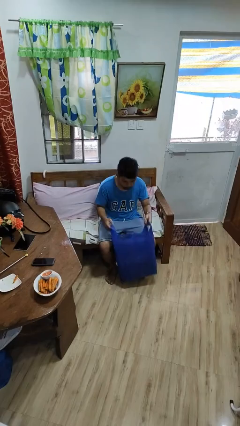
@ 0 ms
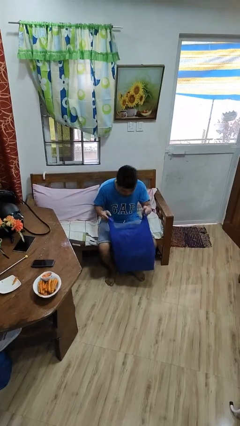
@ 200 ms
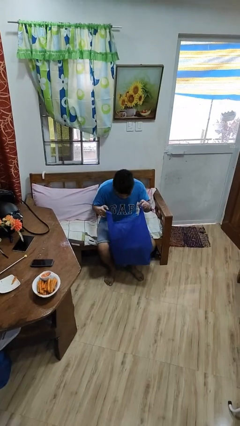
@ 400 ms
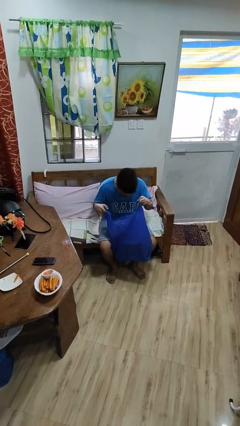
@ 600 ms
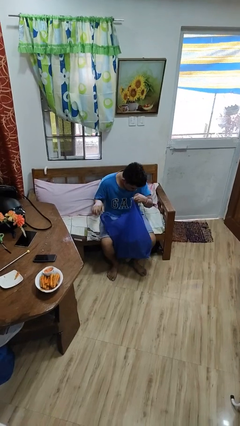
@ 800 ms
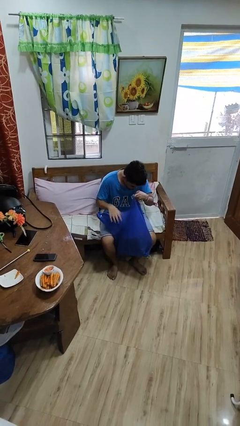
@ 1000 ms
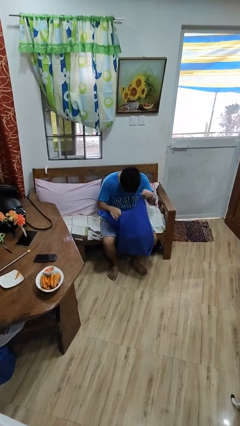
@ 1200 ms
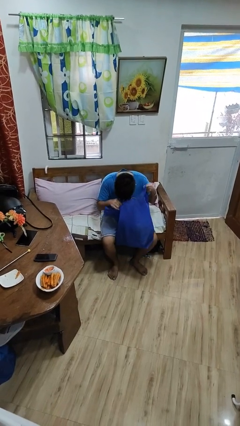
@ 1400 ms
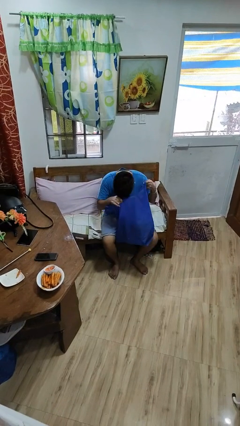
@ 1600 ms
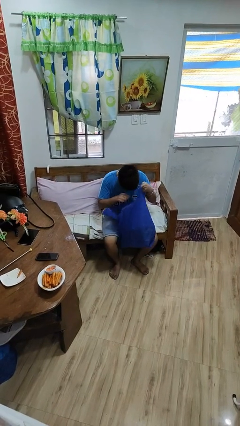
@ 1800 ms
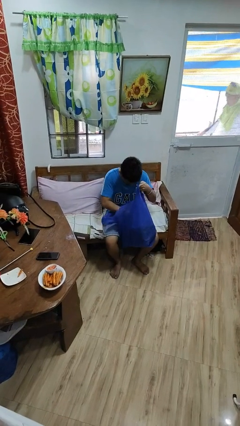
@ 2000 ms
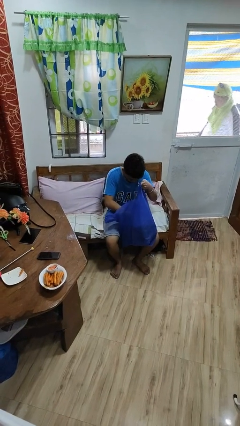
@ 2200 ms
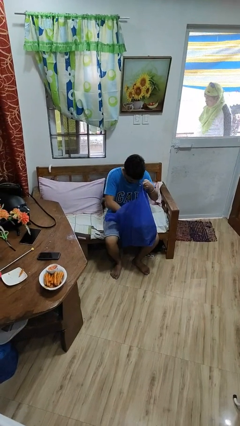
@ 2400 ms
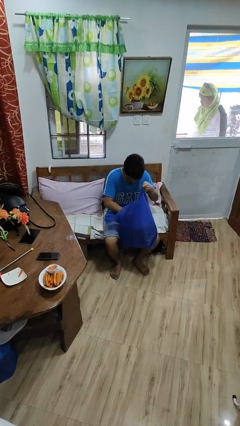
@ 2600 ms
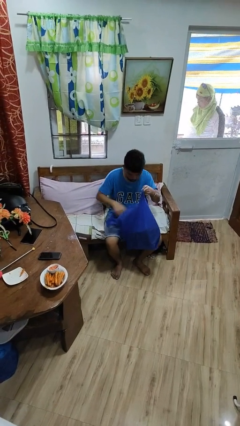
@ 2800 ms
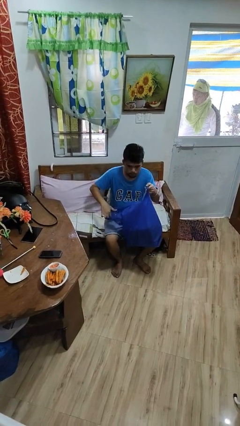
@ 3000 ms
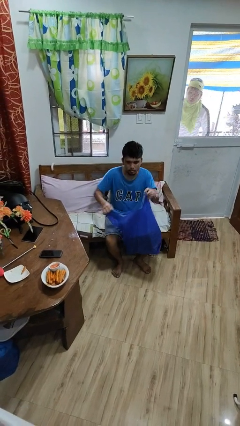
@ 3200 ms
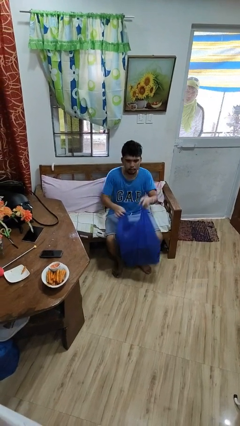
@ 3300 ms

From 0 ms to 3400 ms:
person searches in bag

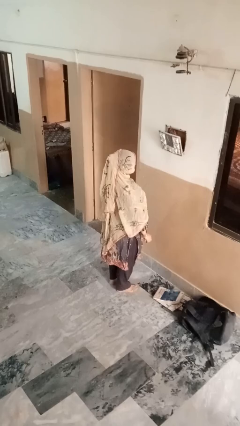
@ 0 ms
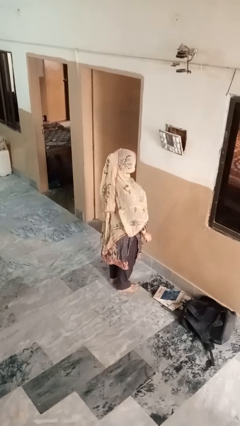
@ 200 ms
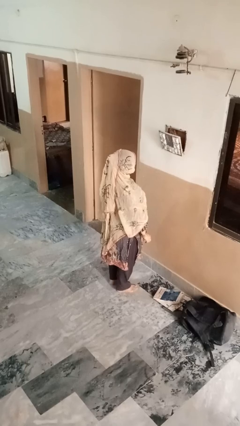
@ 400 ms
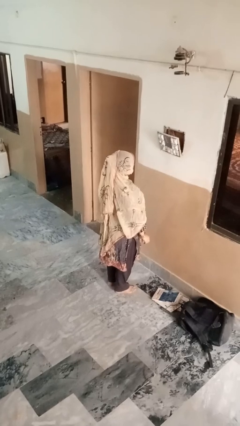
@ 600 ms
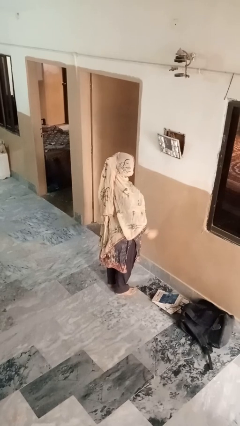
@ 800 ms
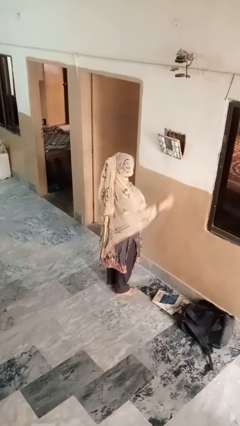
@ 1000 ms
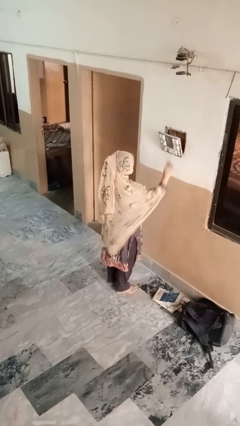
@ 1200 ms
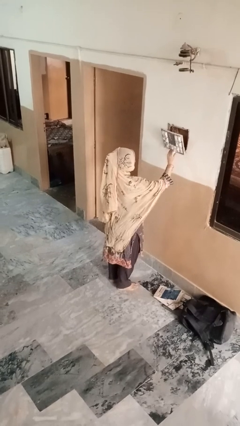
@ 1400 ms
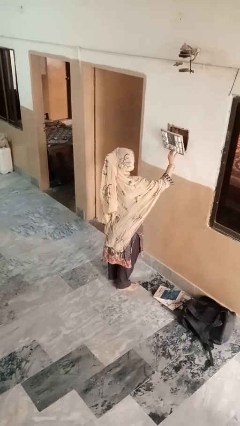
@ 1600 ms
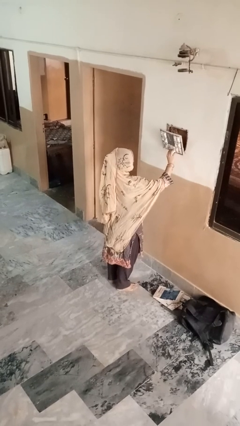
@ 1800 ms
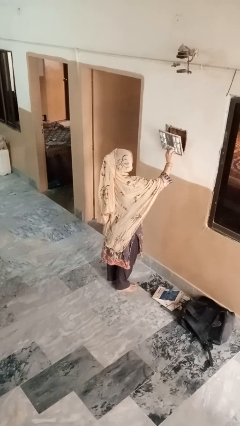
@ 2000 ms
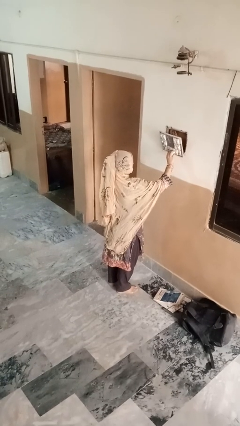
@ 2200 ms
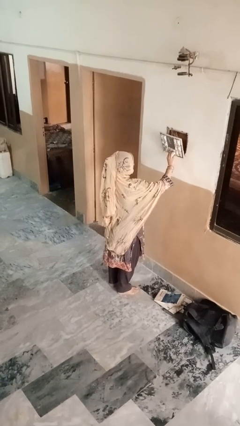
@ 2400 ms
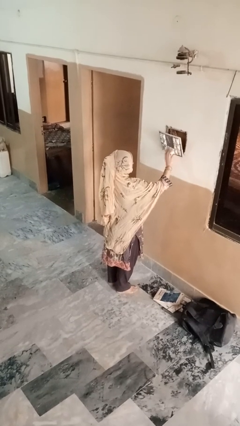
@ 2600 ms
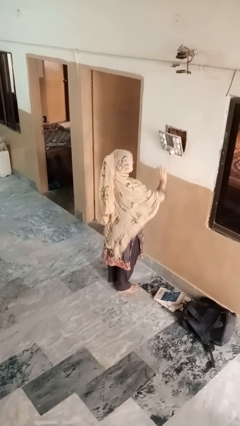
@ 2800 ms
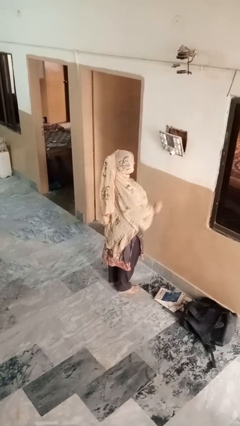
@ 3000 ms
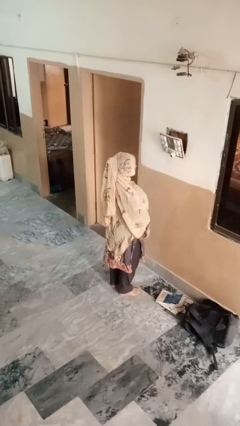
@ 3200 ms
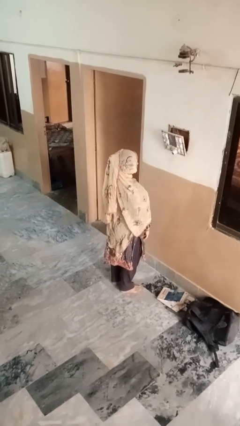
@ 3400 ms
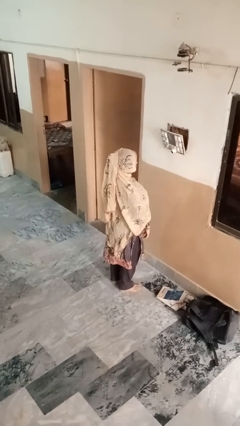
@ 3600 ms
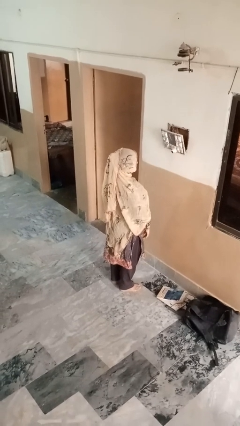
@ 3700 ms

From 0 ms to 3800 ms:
person plugs into electrical socket

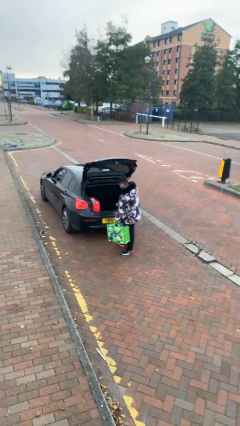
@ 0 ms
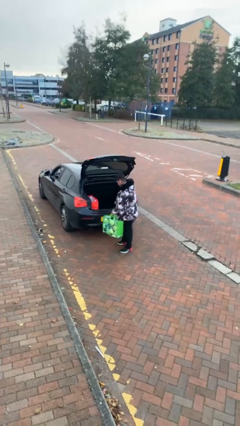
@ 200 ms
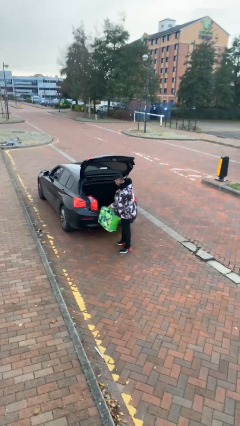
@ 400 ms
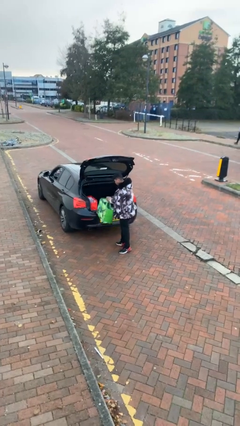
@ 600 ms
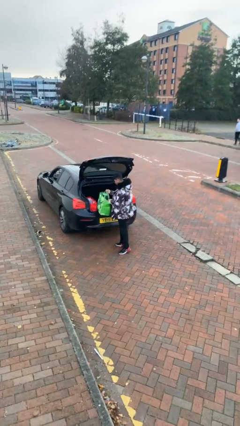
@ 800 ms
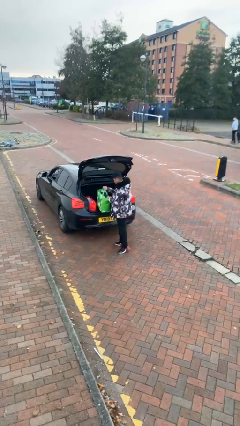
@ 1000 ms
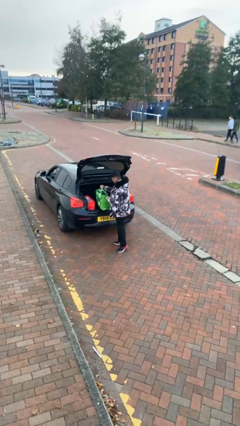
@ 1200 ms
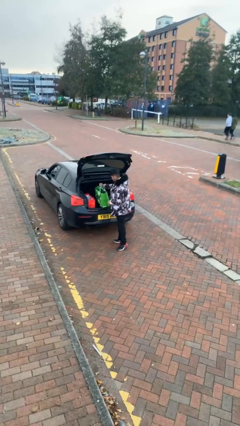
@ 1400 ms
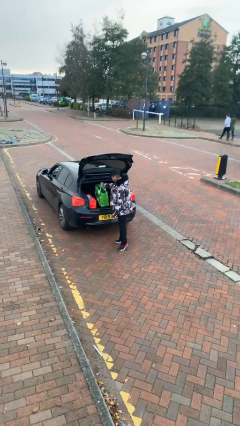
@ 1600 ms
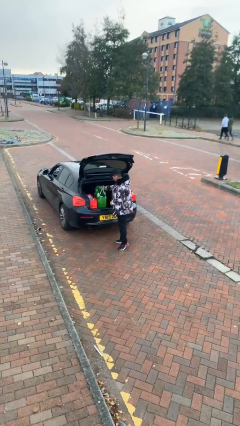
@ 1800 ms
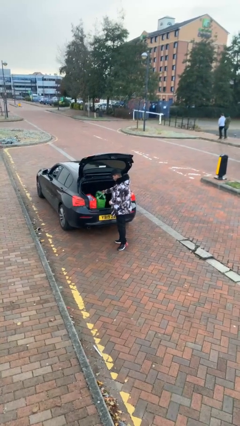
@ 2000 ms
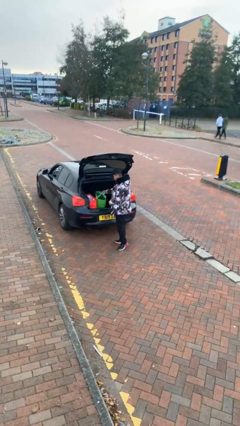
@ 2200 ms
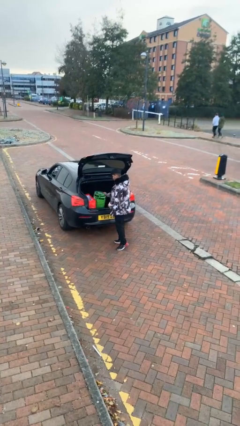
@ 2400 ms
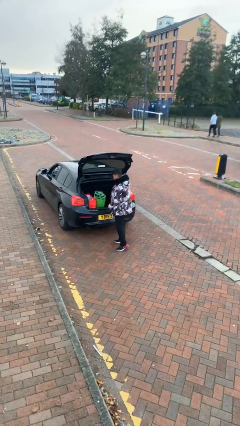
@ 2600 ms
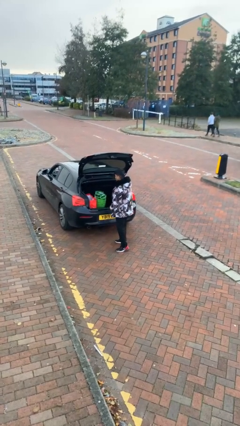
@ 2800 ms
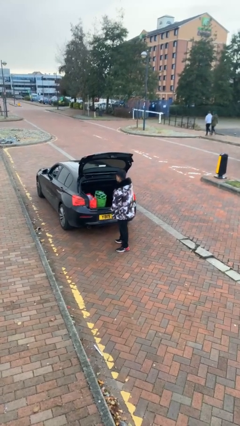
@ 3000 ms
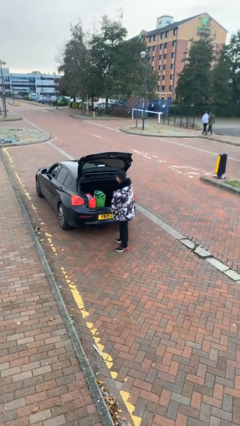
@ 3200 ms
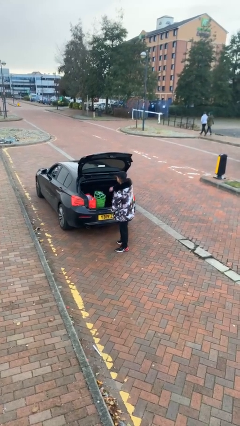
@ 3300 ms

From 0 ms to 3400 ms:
person loads car

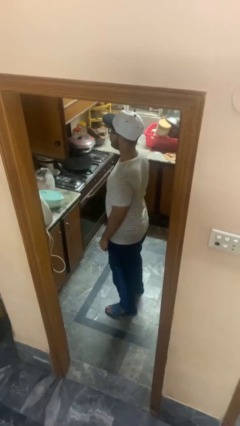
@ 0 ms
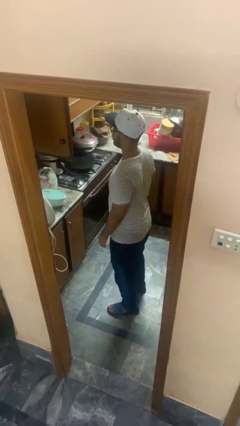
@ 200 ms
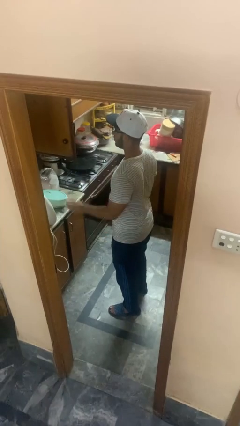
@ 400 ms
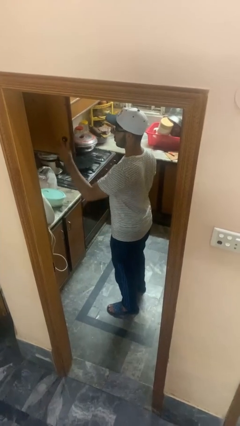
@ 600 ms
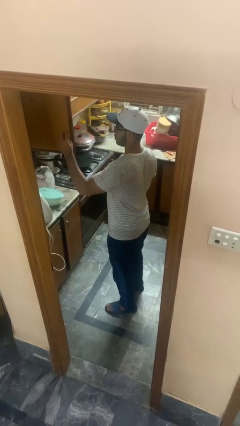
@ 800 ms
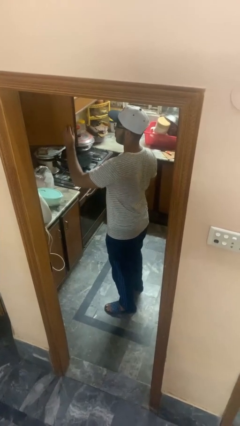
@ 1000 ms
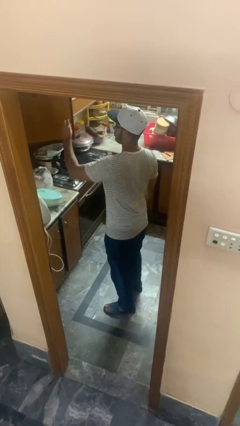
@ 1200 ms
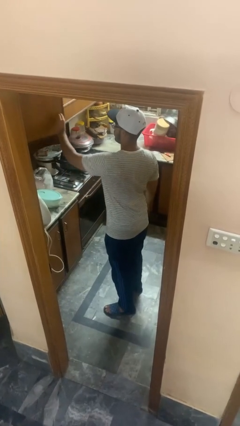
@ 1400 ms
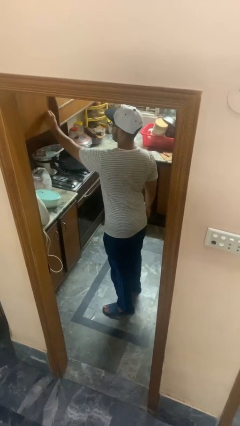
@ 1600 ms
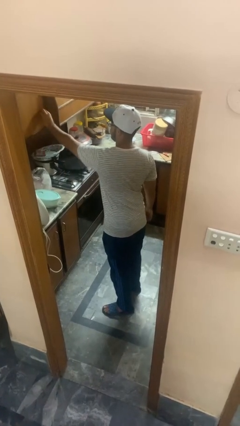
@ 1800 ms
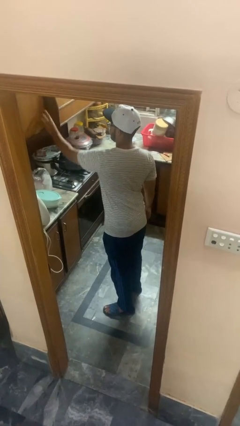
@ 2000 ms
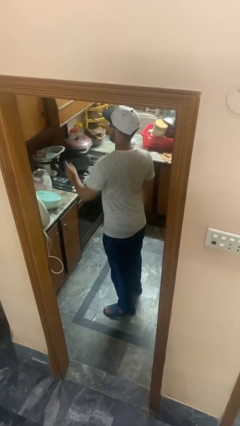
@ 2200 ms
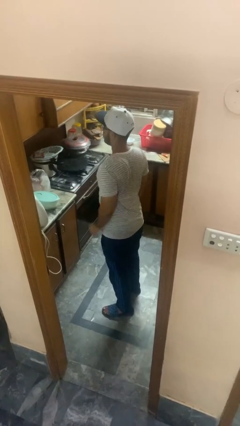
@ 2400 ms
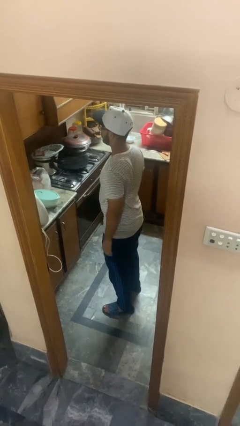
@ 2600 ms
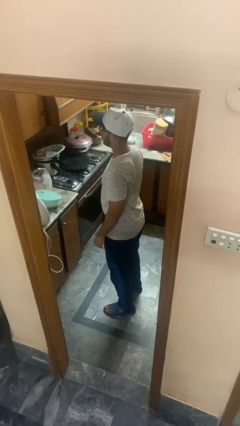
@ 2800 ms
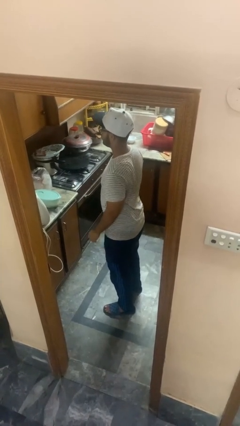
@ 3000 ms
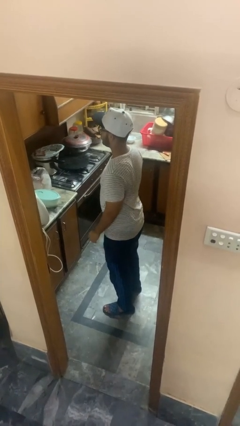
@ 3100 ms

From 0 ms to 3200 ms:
person closes kitchen drawer

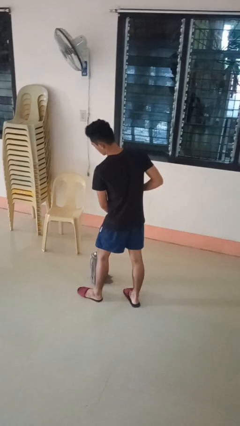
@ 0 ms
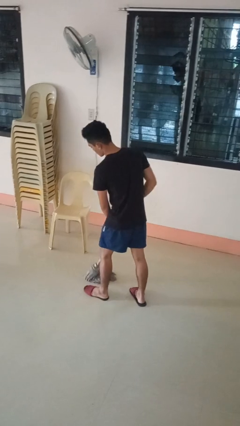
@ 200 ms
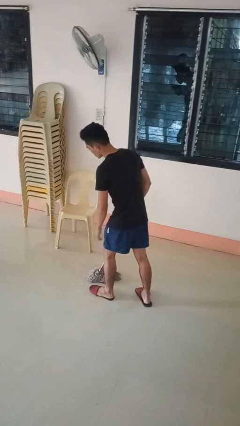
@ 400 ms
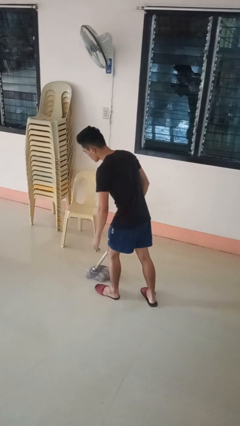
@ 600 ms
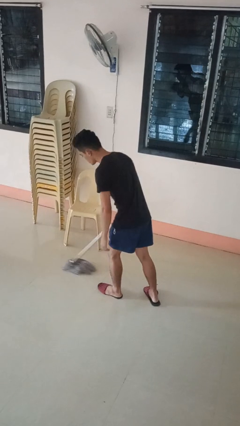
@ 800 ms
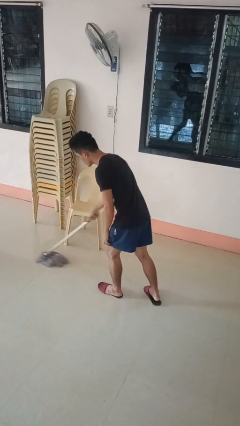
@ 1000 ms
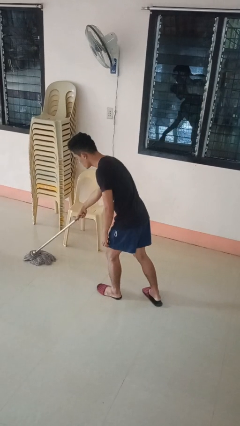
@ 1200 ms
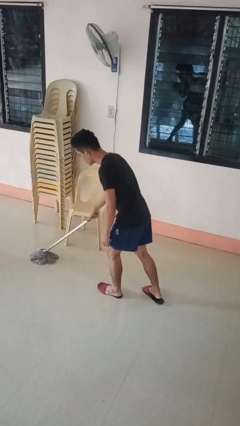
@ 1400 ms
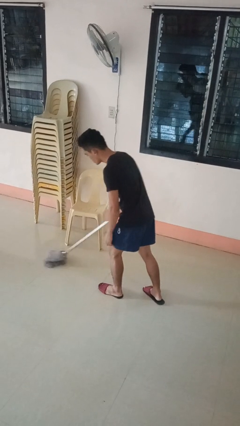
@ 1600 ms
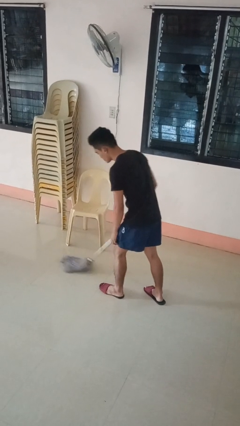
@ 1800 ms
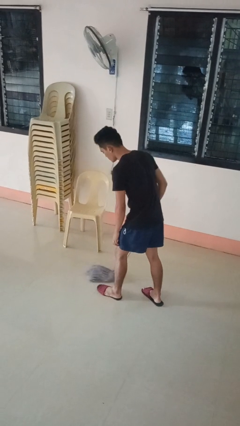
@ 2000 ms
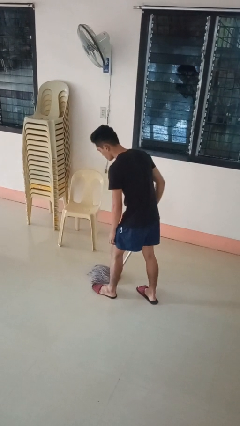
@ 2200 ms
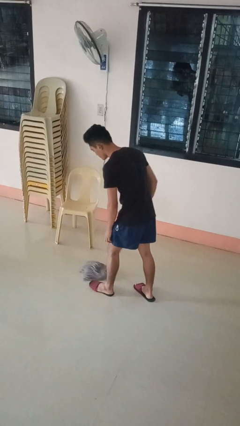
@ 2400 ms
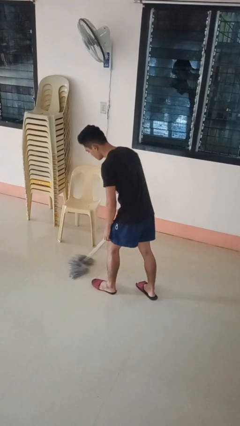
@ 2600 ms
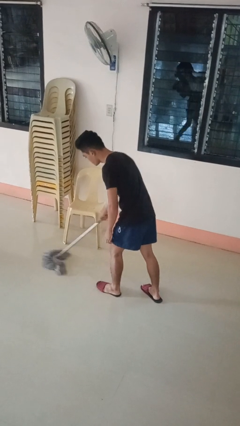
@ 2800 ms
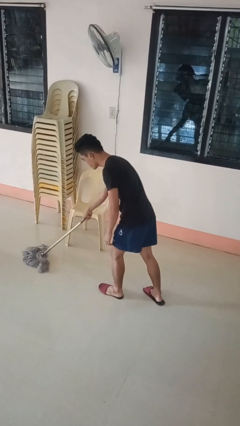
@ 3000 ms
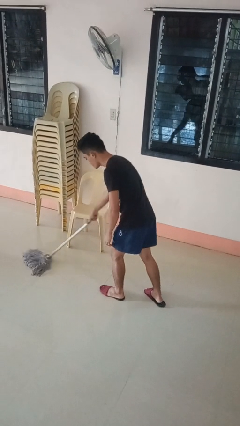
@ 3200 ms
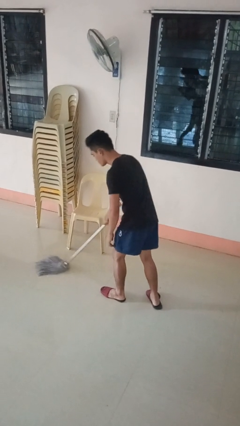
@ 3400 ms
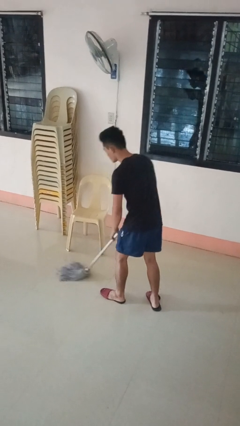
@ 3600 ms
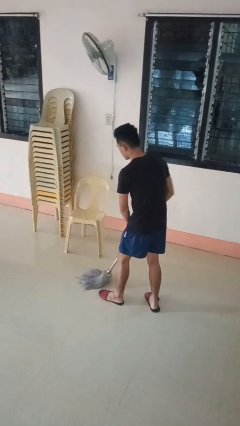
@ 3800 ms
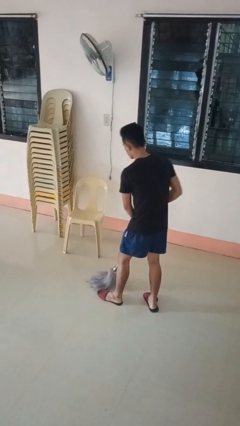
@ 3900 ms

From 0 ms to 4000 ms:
person mops
